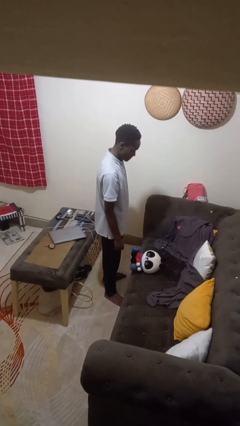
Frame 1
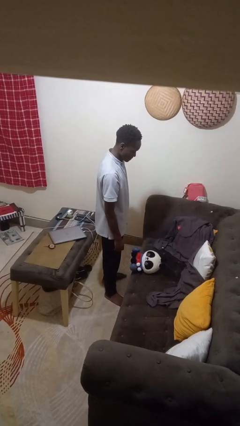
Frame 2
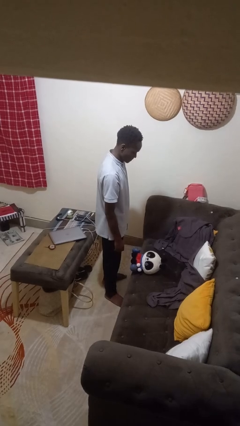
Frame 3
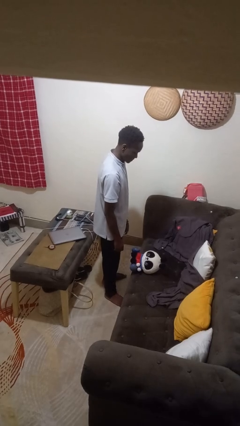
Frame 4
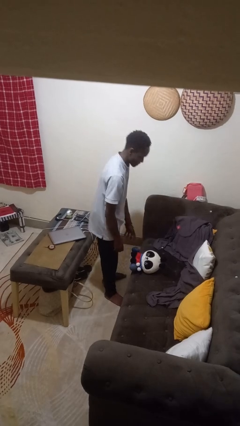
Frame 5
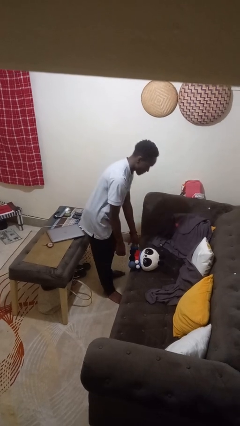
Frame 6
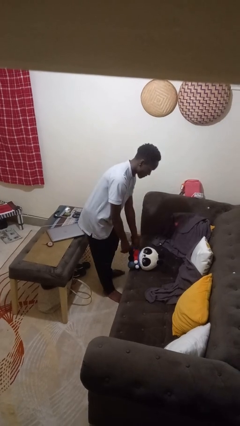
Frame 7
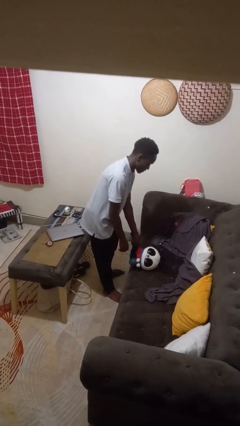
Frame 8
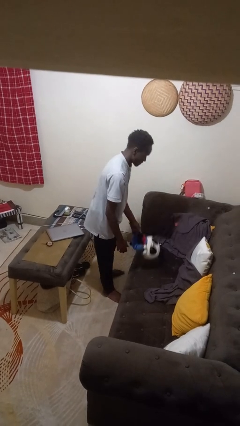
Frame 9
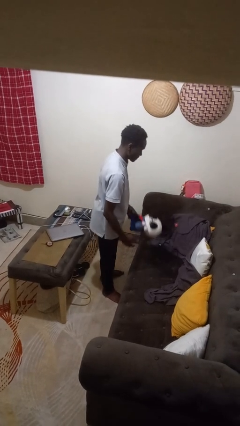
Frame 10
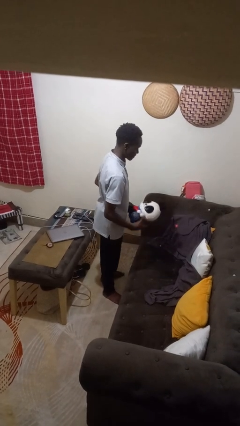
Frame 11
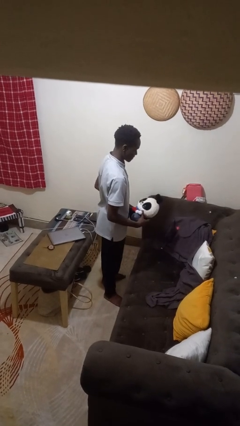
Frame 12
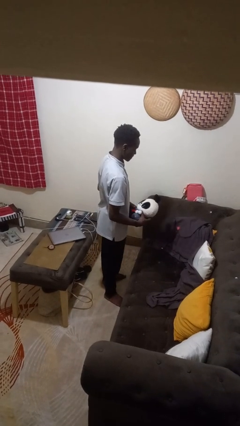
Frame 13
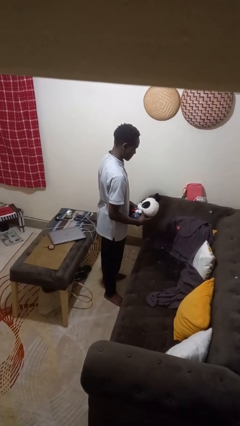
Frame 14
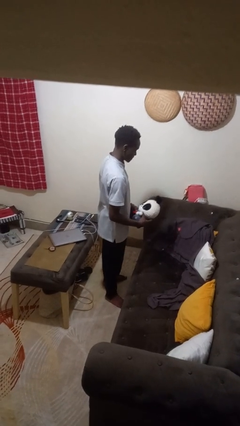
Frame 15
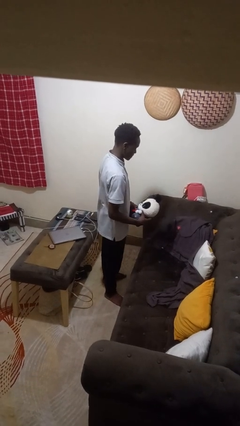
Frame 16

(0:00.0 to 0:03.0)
person picks up object from couch

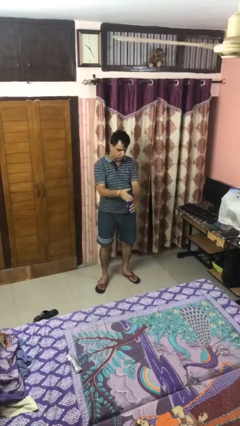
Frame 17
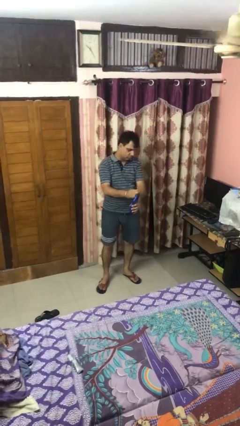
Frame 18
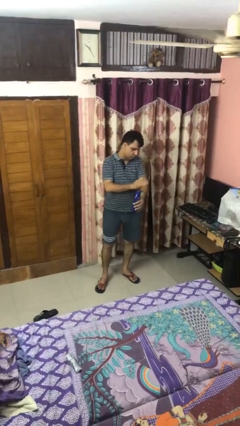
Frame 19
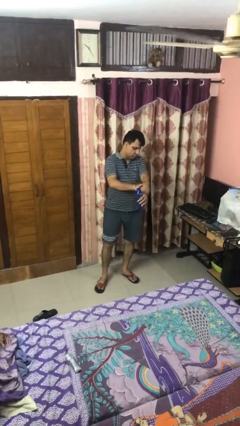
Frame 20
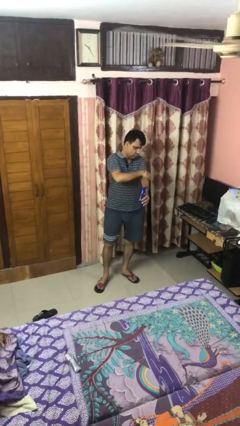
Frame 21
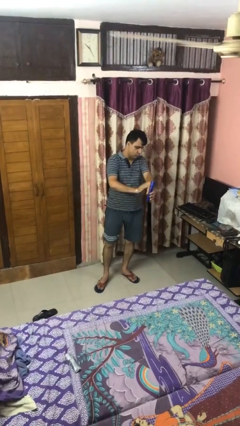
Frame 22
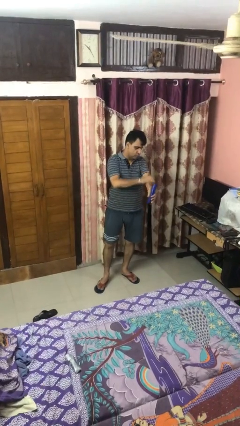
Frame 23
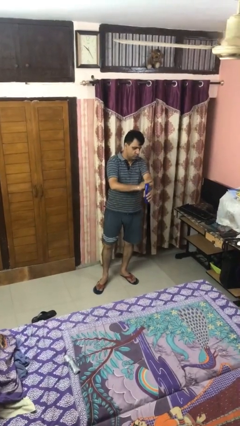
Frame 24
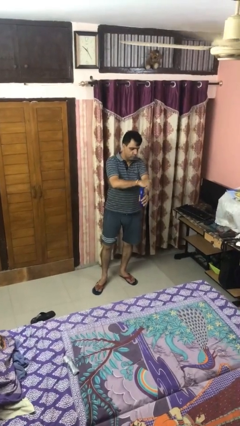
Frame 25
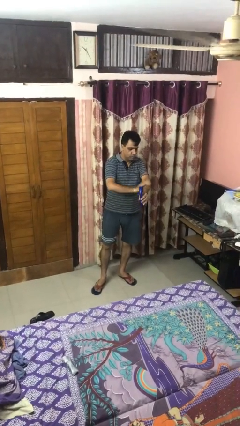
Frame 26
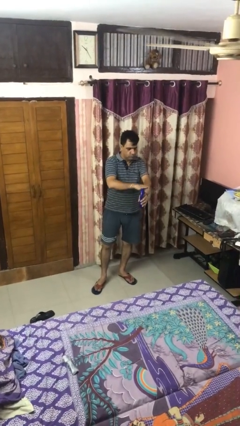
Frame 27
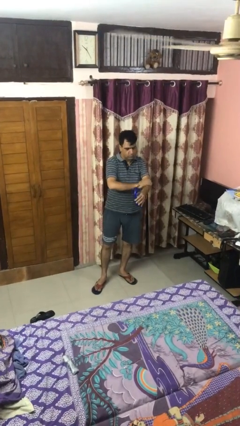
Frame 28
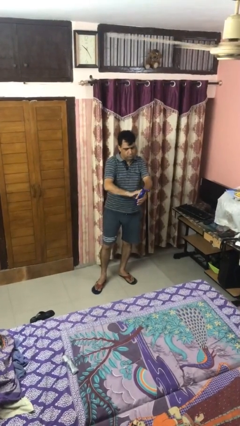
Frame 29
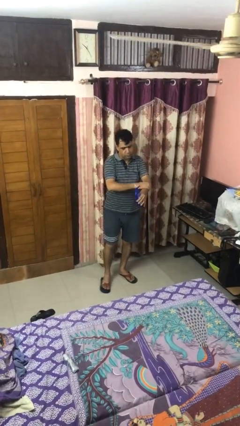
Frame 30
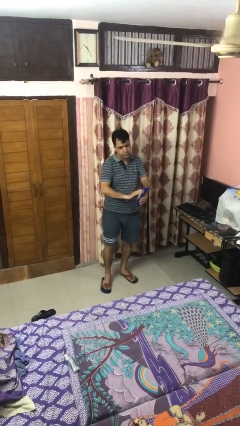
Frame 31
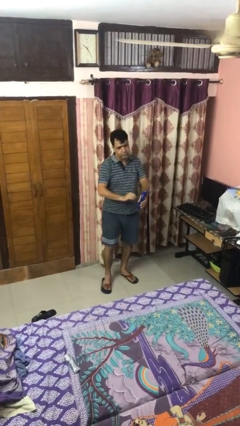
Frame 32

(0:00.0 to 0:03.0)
person applies sunscreen

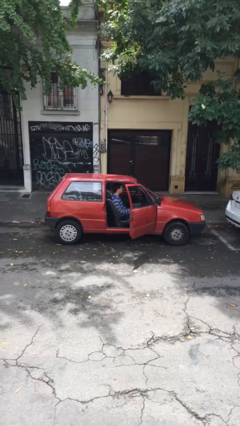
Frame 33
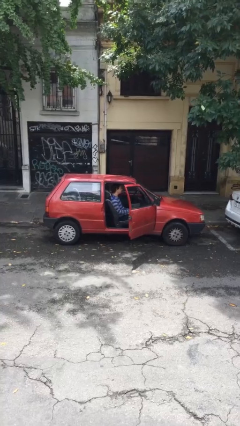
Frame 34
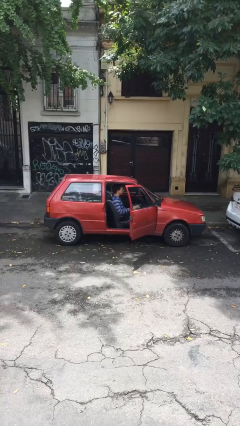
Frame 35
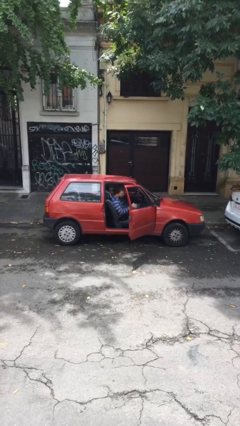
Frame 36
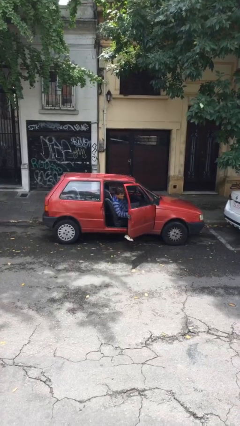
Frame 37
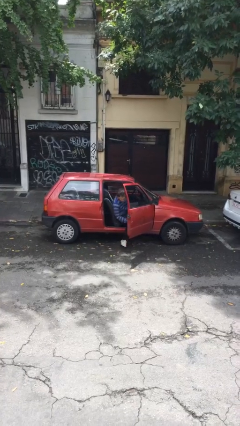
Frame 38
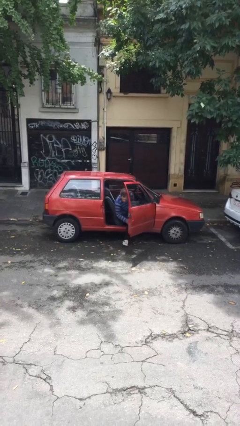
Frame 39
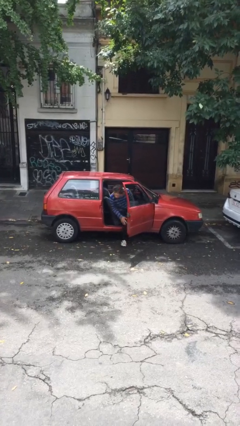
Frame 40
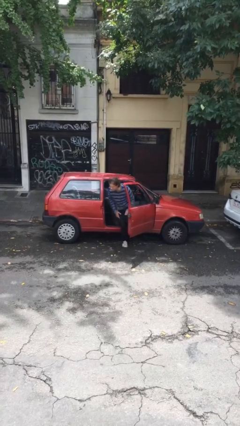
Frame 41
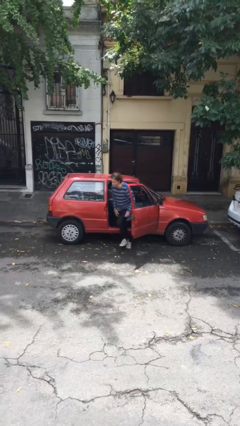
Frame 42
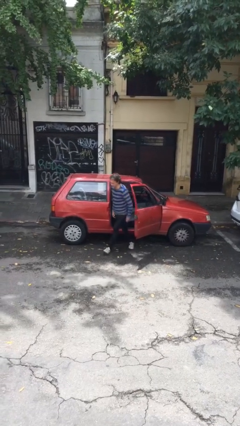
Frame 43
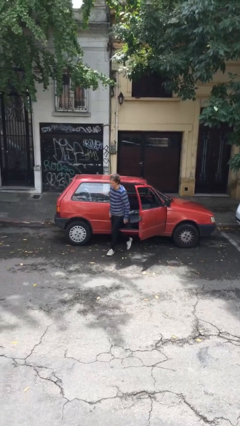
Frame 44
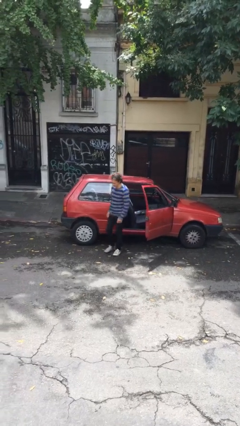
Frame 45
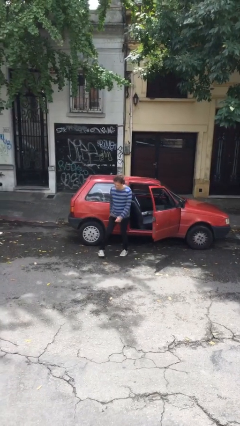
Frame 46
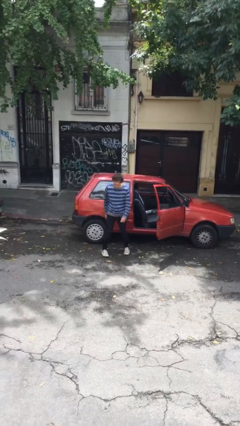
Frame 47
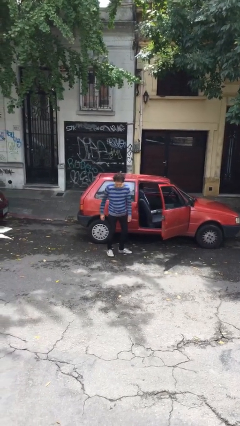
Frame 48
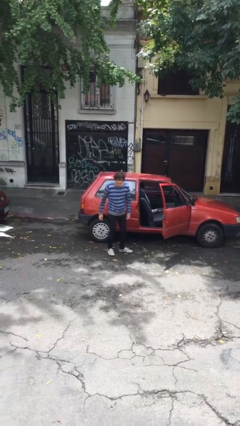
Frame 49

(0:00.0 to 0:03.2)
person exits car

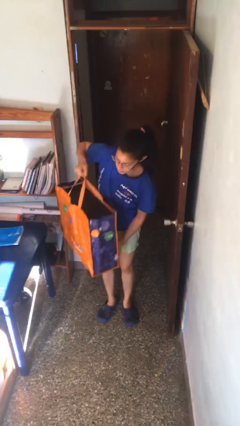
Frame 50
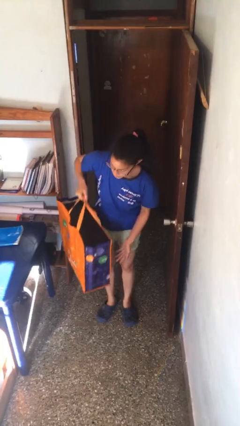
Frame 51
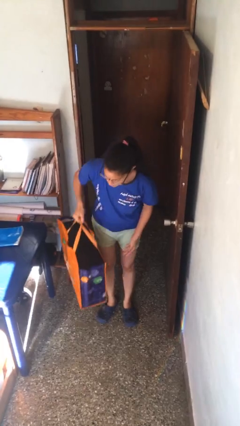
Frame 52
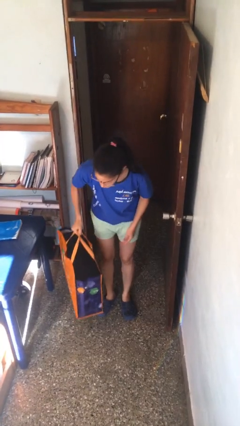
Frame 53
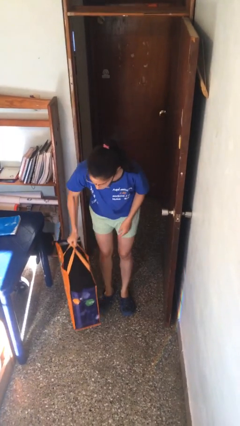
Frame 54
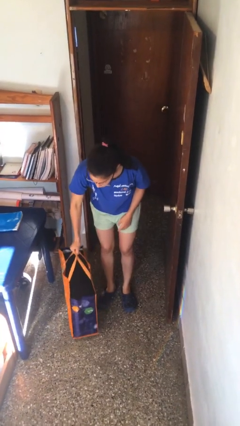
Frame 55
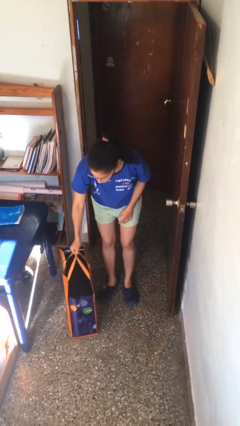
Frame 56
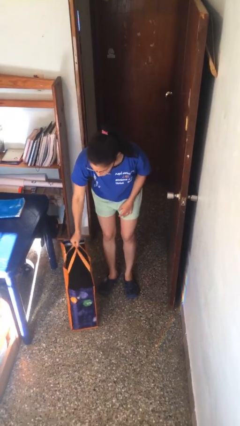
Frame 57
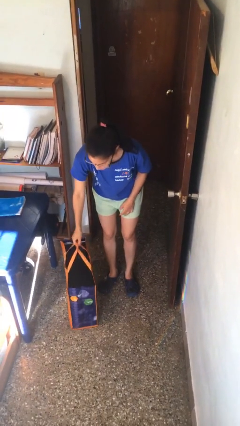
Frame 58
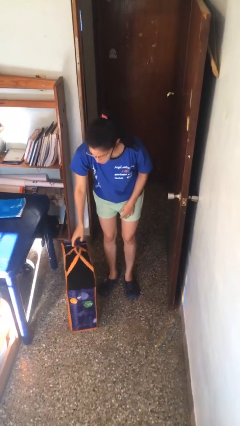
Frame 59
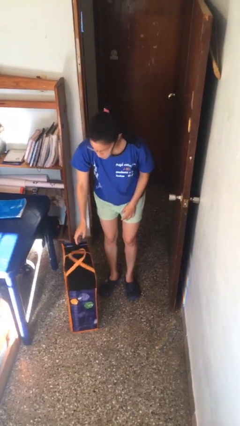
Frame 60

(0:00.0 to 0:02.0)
person puts down object on floor

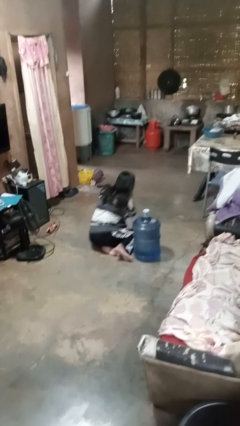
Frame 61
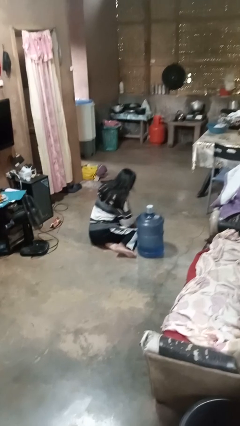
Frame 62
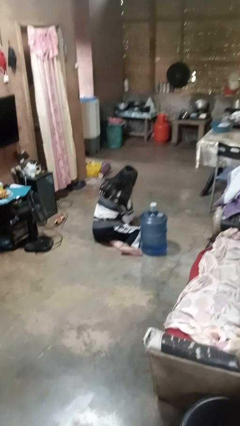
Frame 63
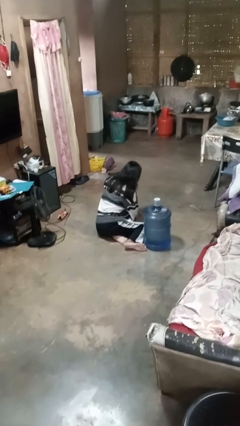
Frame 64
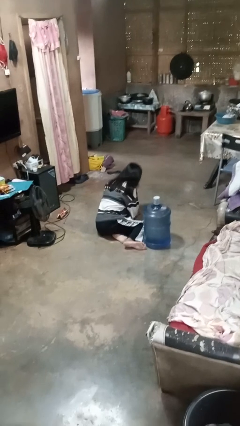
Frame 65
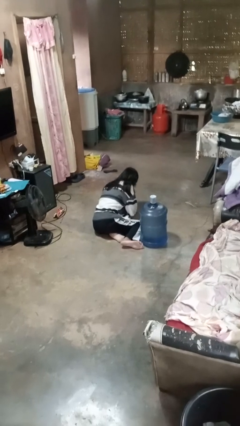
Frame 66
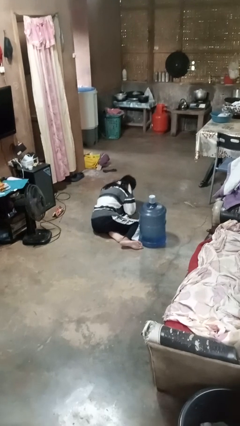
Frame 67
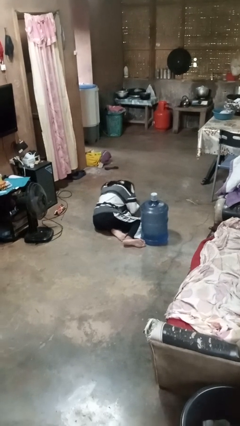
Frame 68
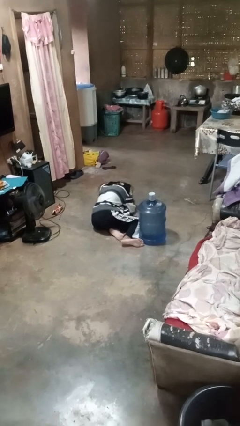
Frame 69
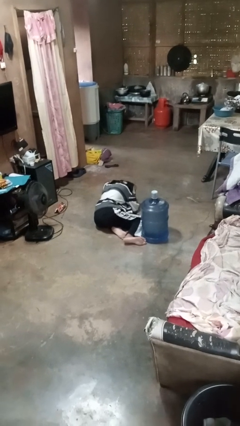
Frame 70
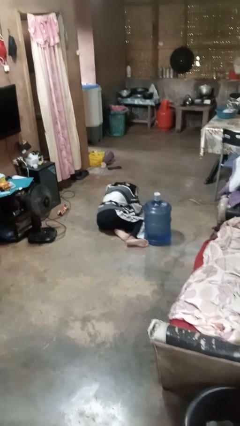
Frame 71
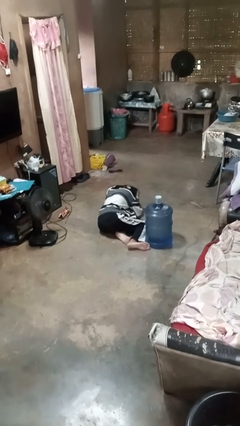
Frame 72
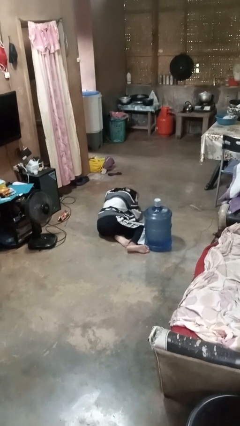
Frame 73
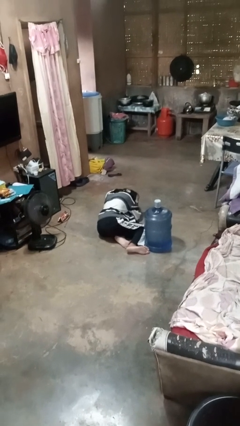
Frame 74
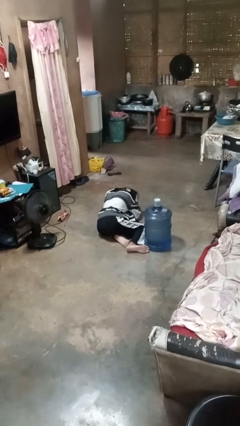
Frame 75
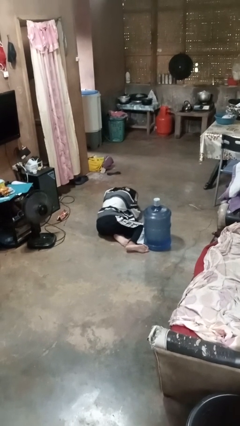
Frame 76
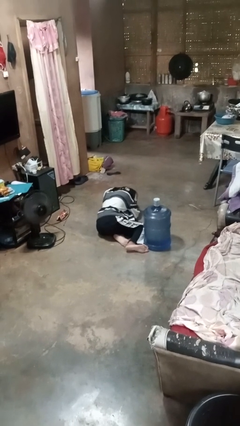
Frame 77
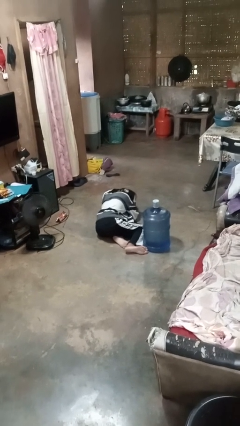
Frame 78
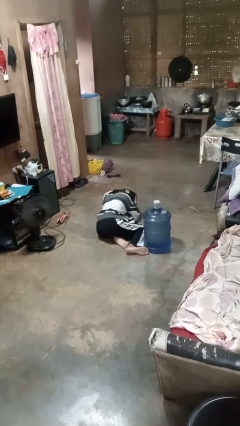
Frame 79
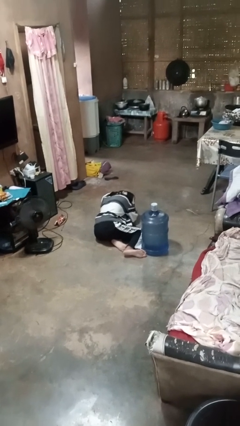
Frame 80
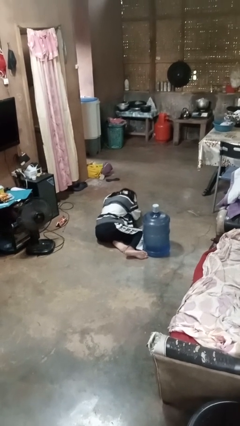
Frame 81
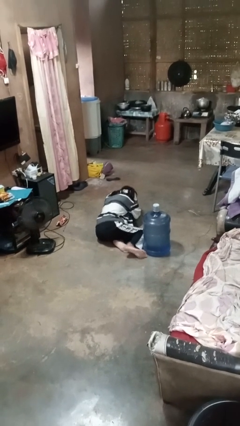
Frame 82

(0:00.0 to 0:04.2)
person lies down on floor

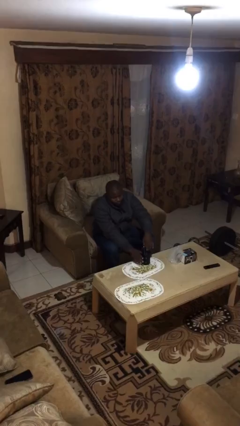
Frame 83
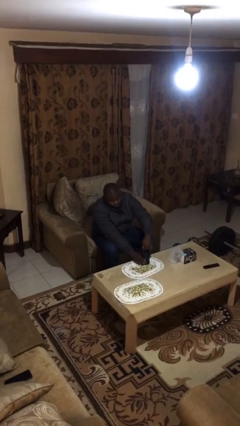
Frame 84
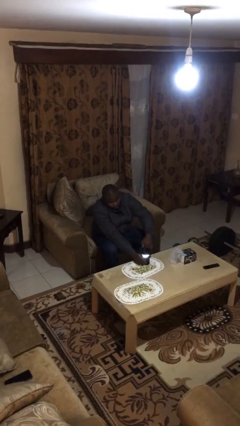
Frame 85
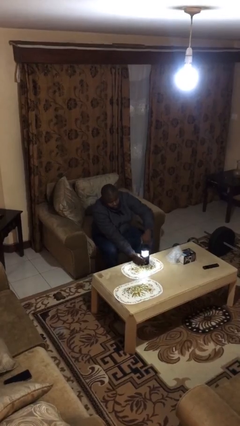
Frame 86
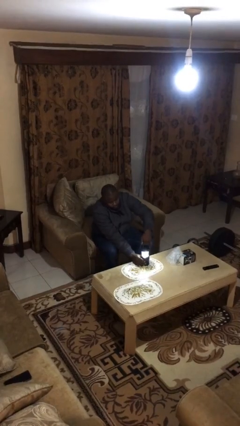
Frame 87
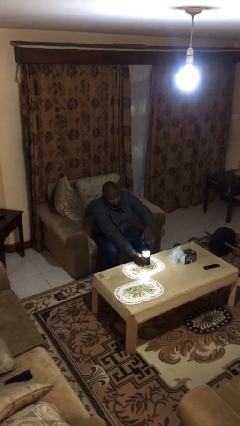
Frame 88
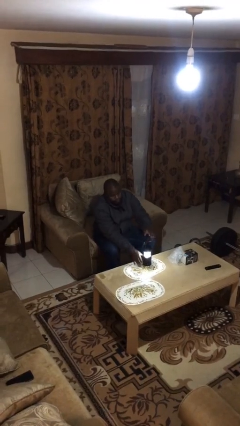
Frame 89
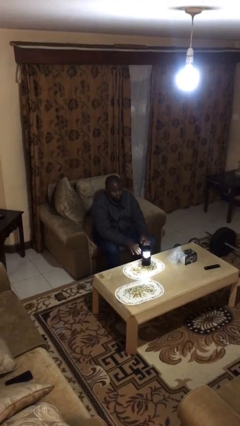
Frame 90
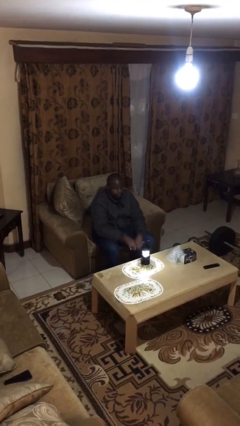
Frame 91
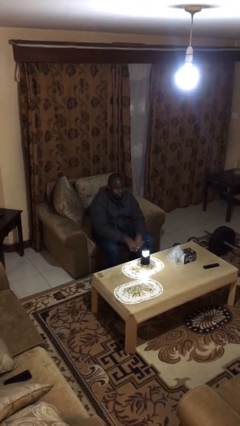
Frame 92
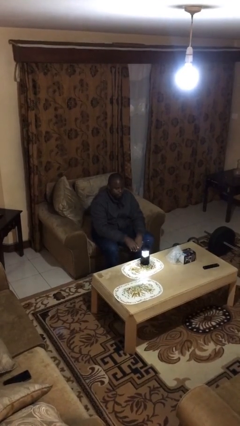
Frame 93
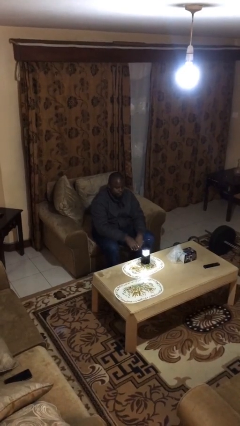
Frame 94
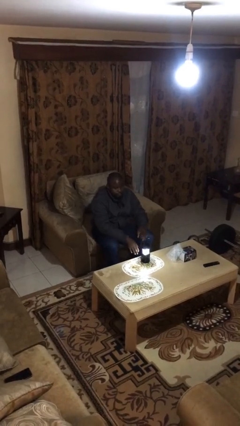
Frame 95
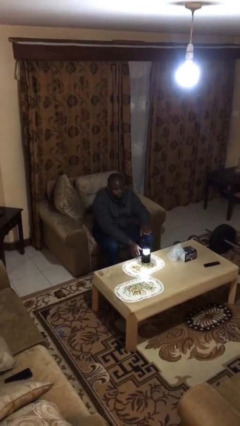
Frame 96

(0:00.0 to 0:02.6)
person turns on lamp
